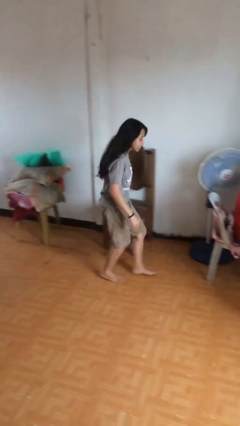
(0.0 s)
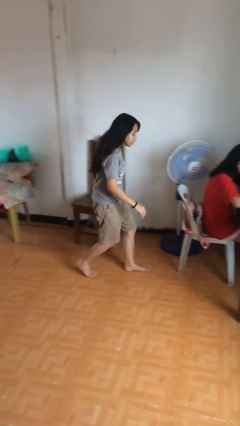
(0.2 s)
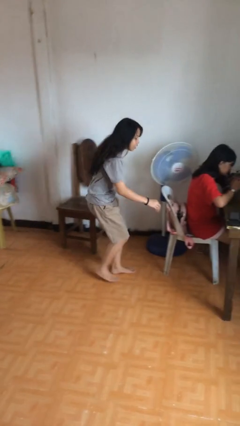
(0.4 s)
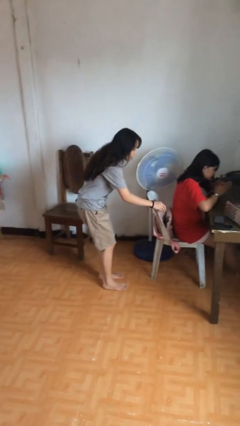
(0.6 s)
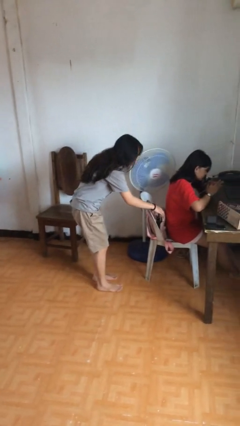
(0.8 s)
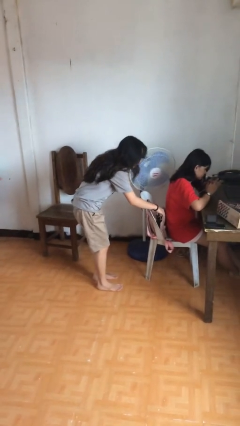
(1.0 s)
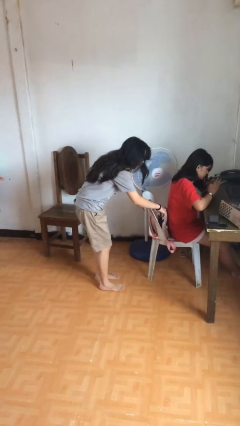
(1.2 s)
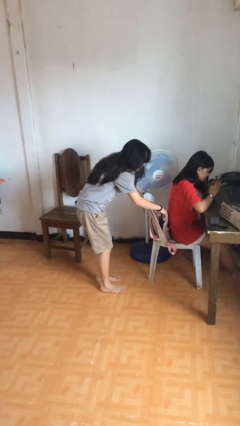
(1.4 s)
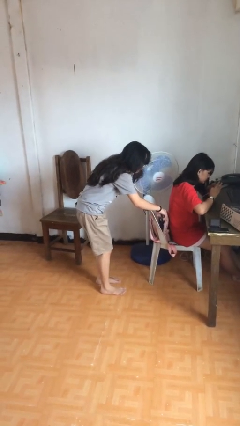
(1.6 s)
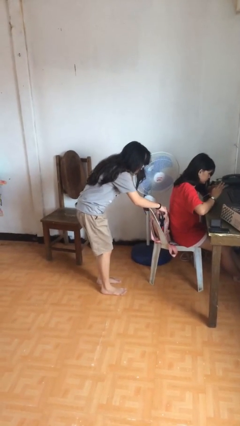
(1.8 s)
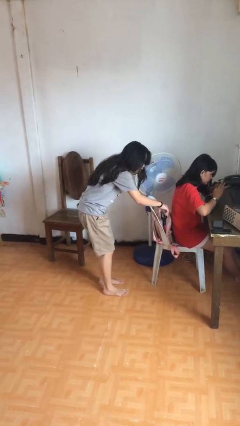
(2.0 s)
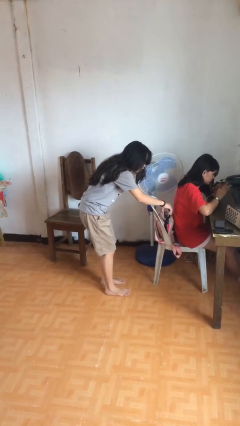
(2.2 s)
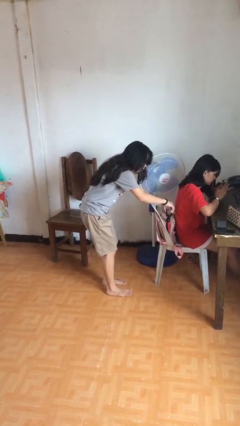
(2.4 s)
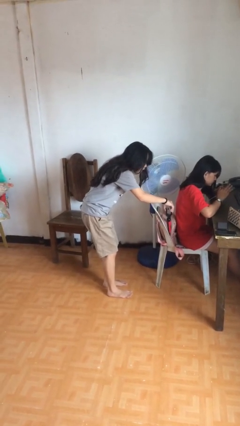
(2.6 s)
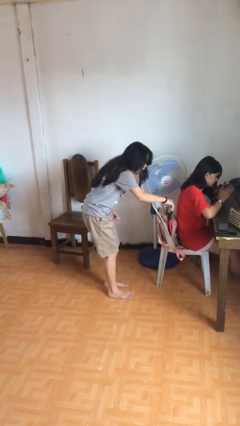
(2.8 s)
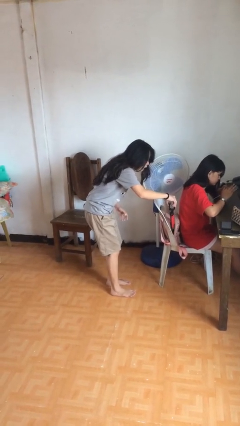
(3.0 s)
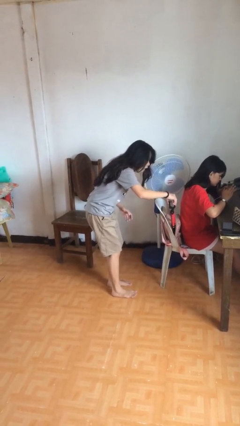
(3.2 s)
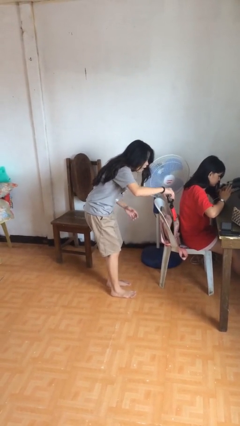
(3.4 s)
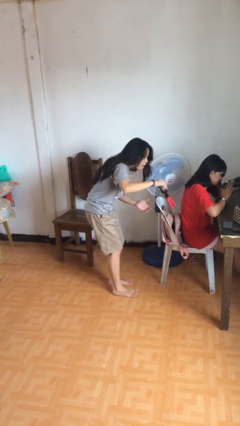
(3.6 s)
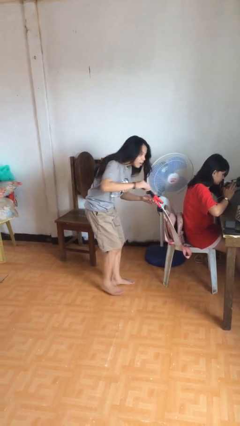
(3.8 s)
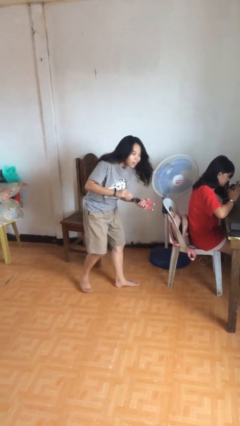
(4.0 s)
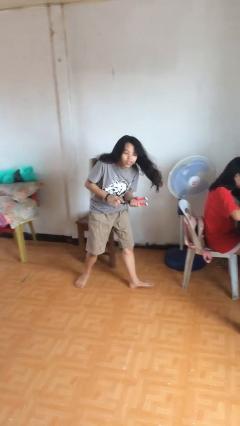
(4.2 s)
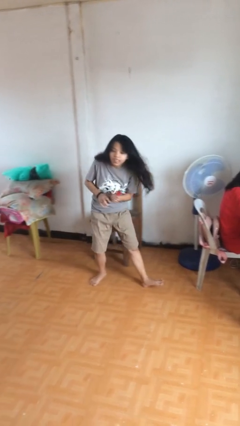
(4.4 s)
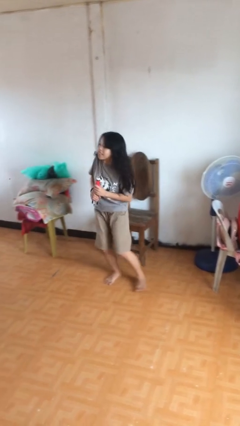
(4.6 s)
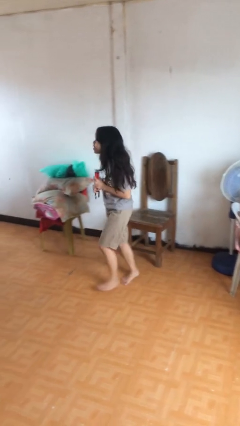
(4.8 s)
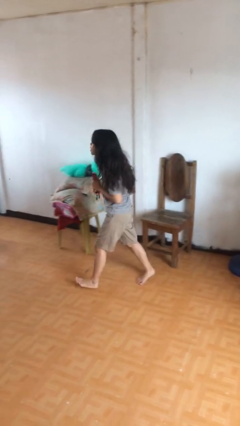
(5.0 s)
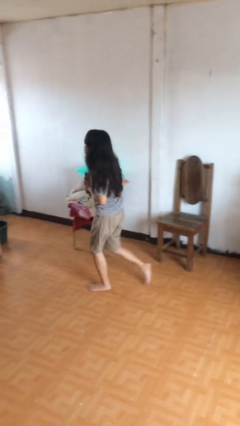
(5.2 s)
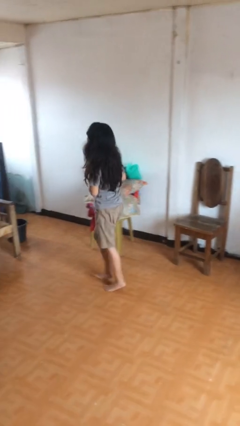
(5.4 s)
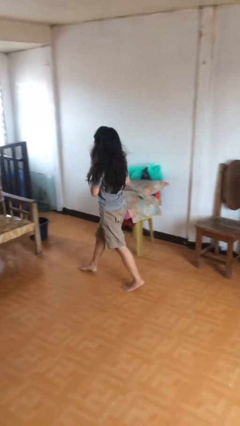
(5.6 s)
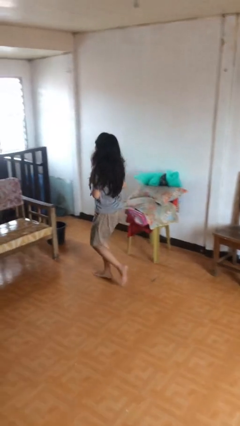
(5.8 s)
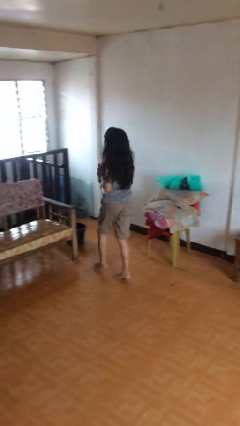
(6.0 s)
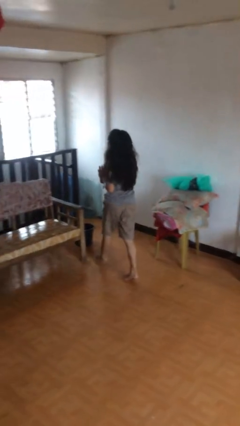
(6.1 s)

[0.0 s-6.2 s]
person steals object from person

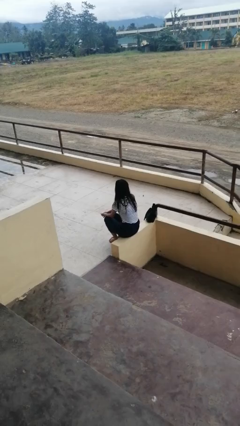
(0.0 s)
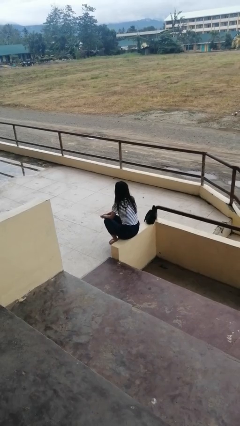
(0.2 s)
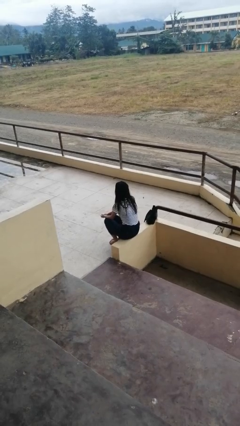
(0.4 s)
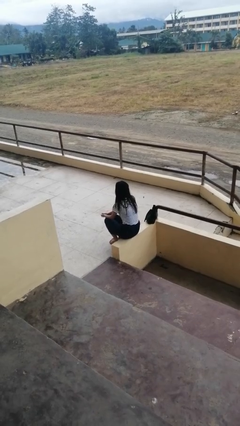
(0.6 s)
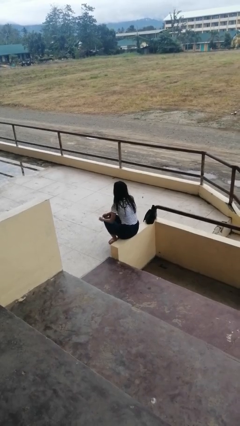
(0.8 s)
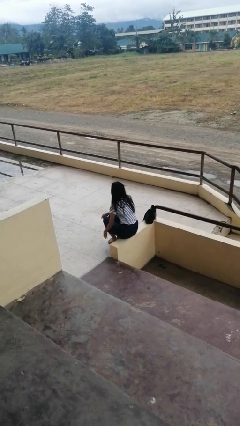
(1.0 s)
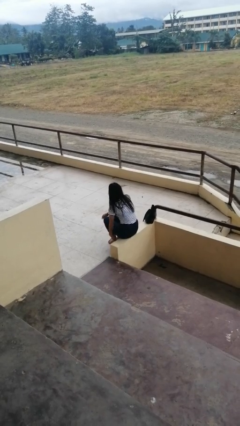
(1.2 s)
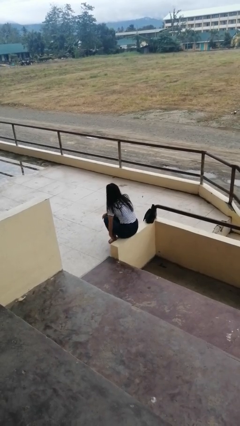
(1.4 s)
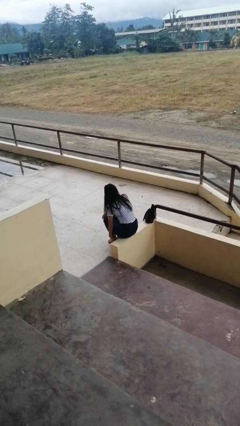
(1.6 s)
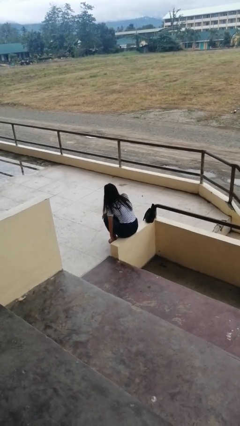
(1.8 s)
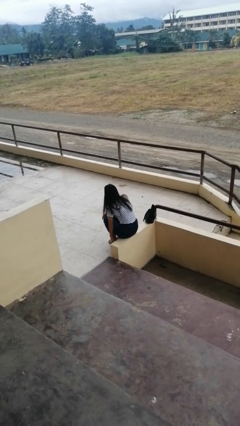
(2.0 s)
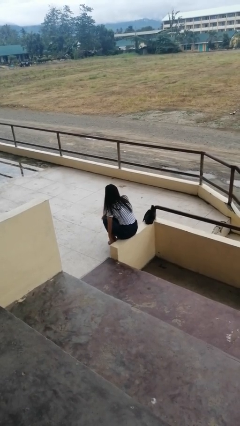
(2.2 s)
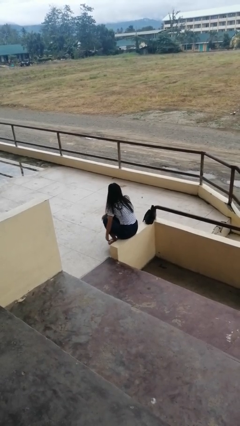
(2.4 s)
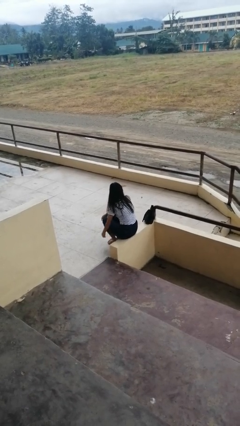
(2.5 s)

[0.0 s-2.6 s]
person rubs foot

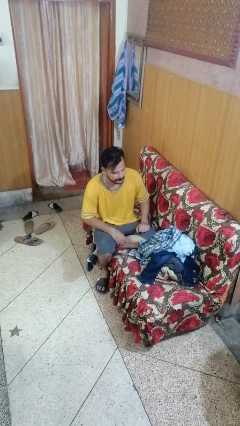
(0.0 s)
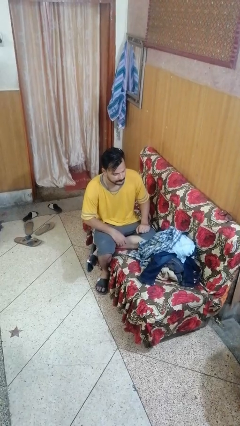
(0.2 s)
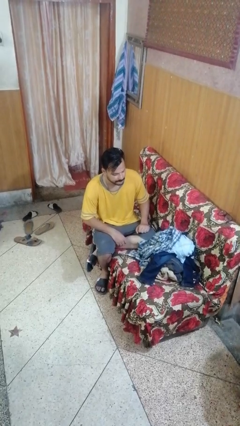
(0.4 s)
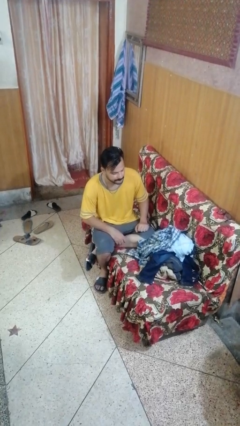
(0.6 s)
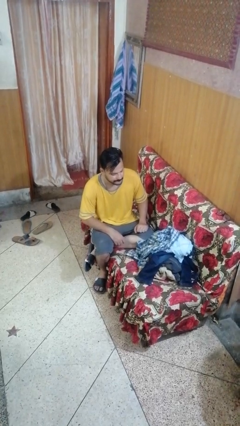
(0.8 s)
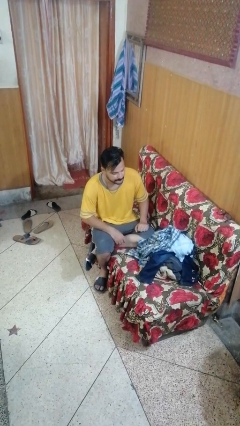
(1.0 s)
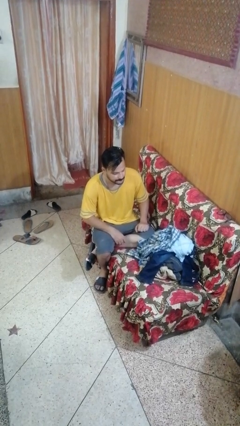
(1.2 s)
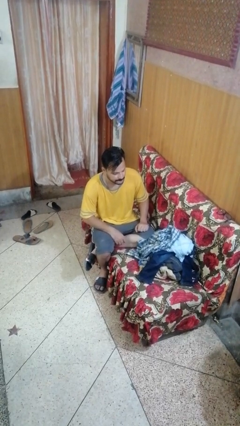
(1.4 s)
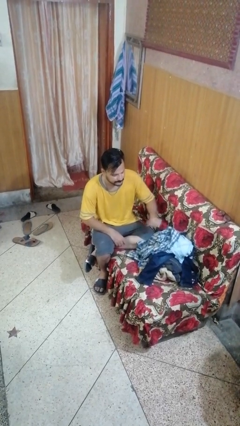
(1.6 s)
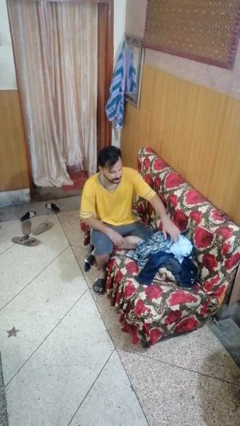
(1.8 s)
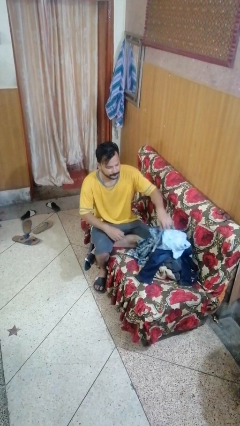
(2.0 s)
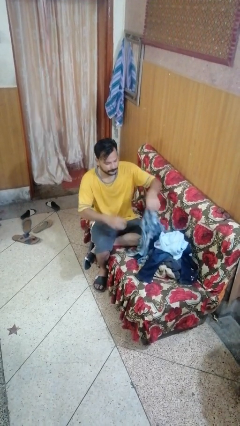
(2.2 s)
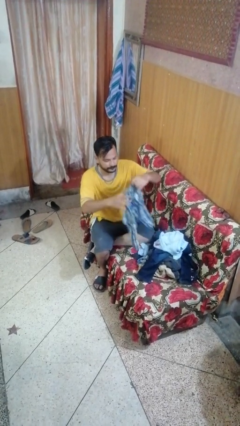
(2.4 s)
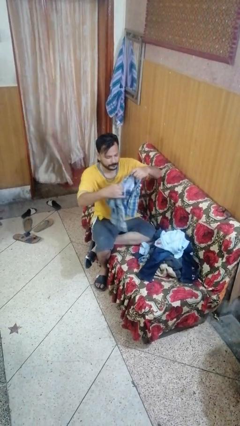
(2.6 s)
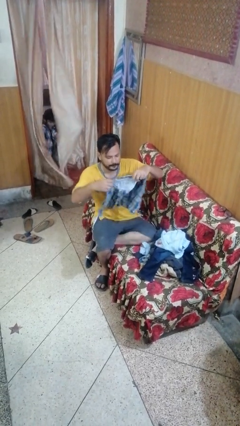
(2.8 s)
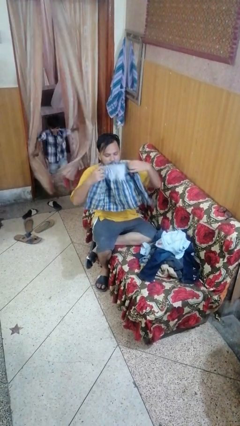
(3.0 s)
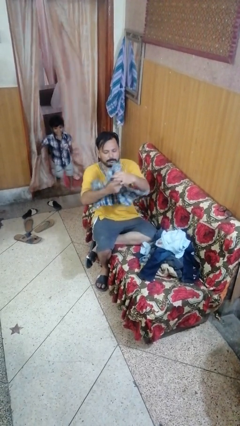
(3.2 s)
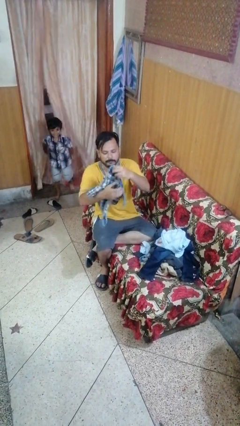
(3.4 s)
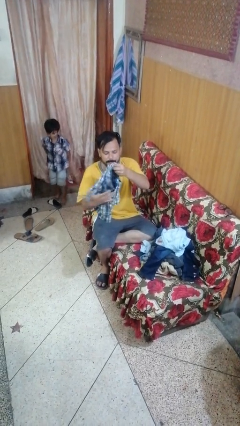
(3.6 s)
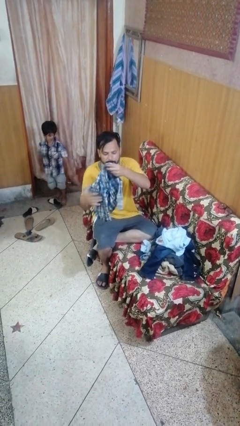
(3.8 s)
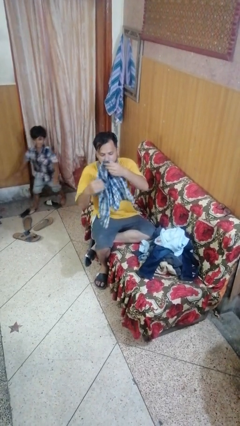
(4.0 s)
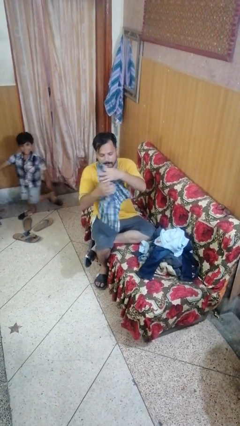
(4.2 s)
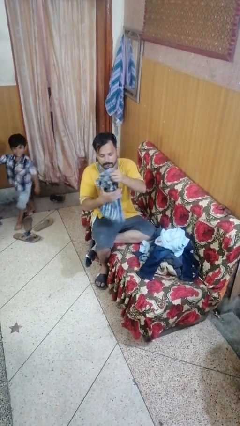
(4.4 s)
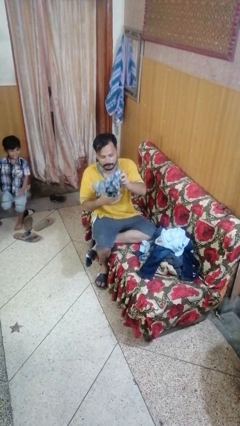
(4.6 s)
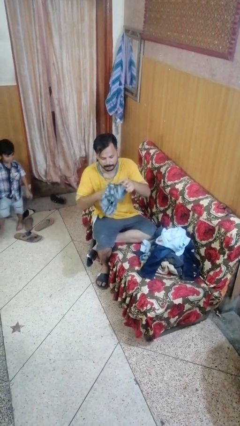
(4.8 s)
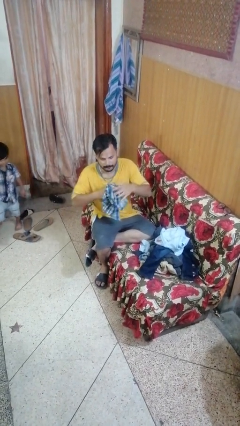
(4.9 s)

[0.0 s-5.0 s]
person folds shirt

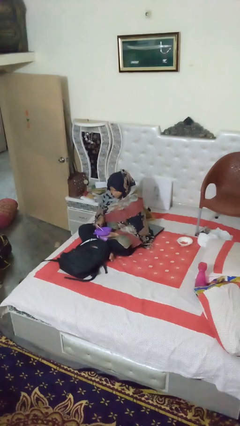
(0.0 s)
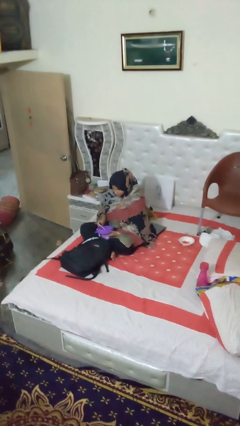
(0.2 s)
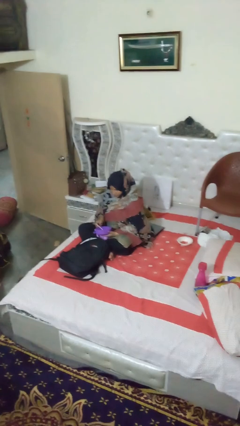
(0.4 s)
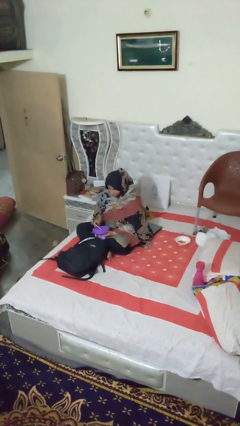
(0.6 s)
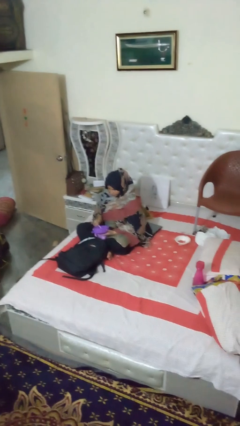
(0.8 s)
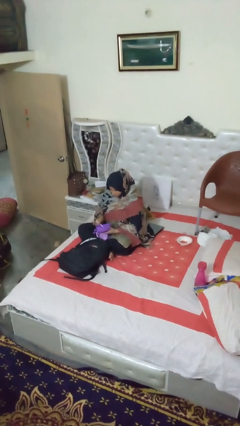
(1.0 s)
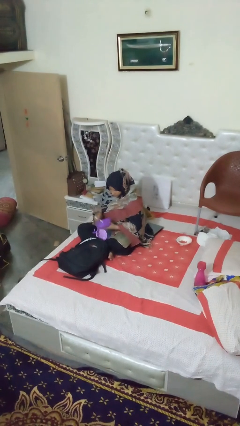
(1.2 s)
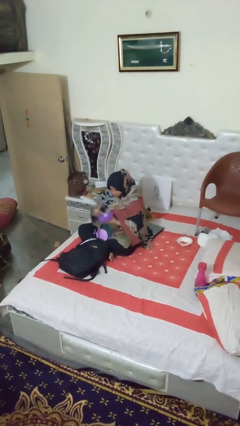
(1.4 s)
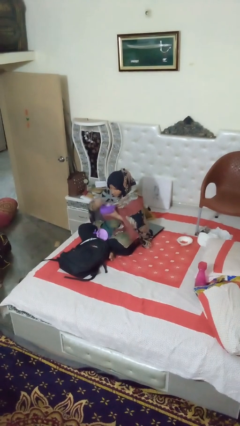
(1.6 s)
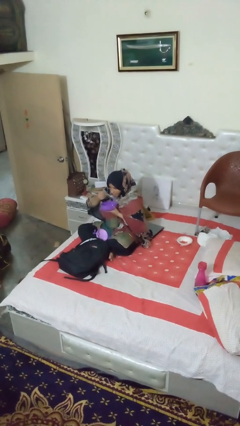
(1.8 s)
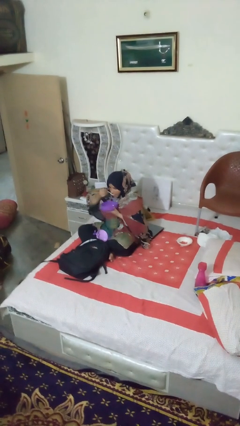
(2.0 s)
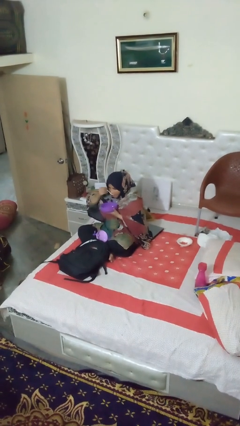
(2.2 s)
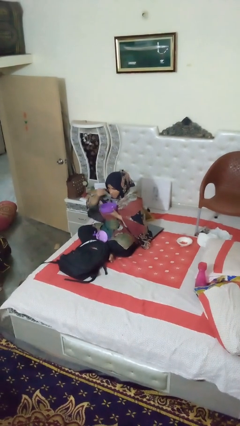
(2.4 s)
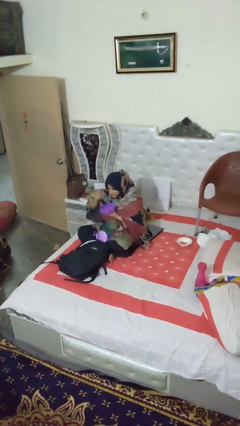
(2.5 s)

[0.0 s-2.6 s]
person eats snack from bag

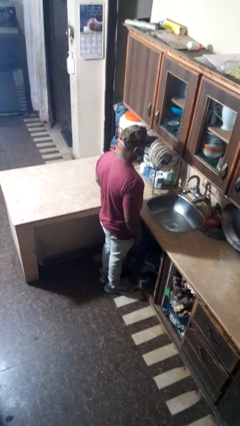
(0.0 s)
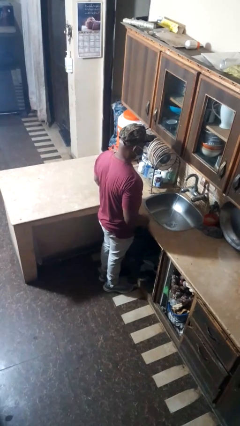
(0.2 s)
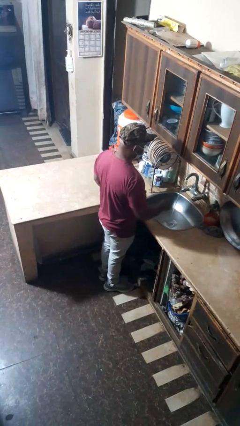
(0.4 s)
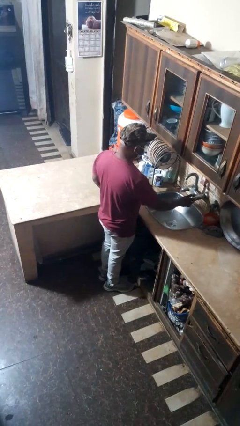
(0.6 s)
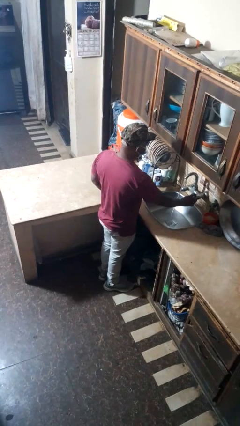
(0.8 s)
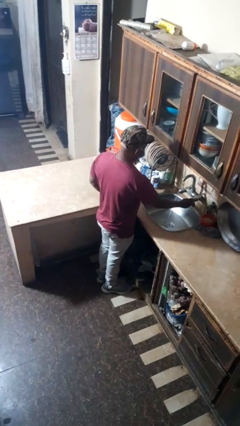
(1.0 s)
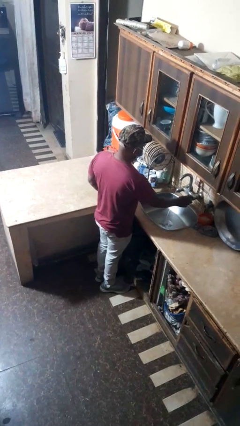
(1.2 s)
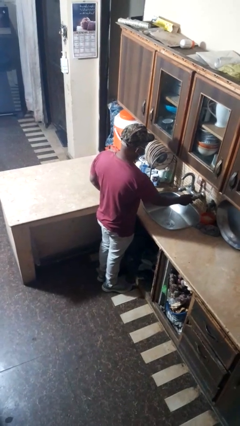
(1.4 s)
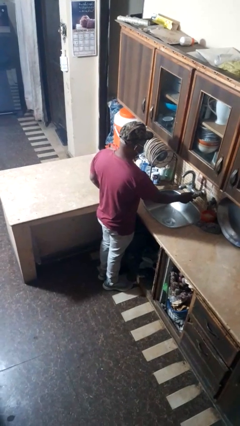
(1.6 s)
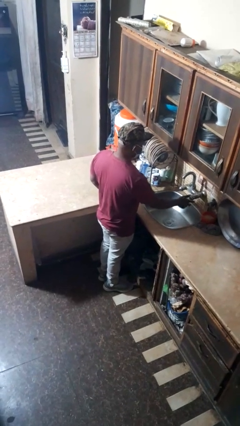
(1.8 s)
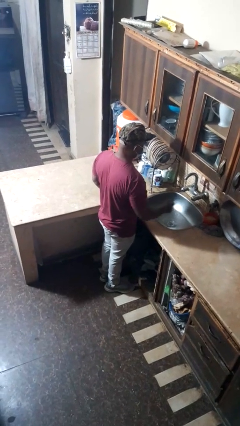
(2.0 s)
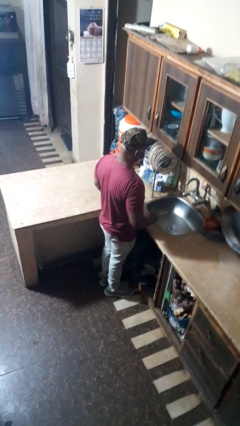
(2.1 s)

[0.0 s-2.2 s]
person turns off faucet
